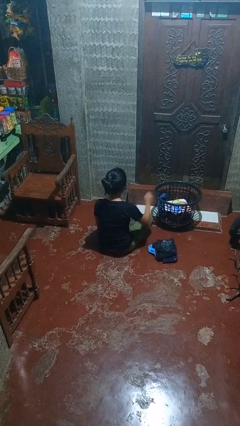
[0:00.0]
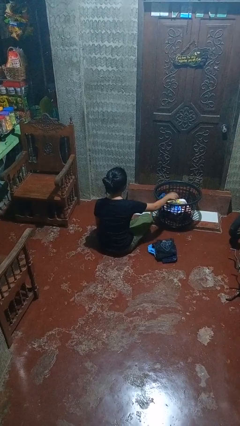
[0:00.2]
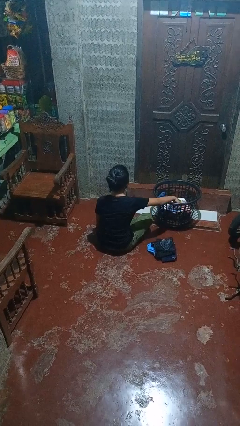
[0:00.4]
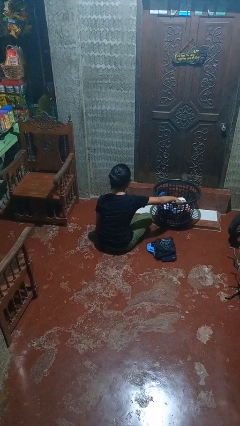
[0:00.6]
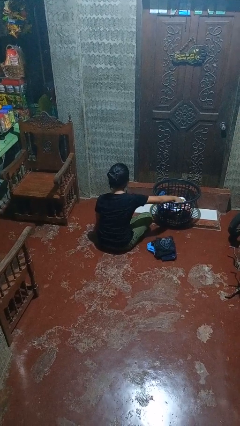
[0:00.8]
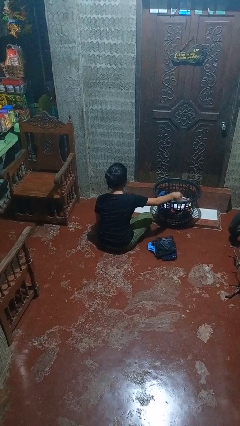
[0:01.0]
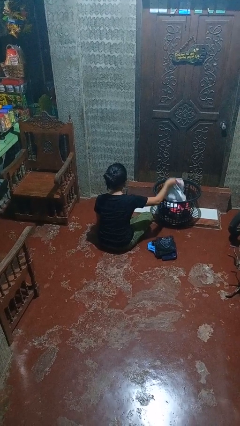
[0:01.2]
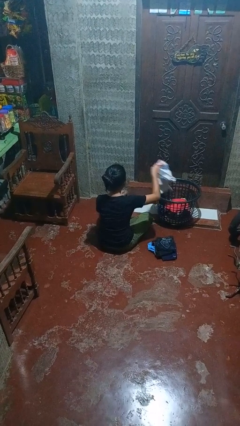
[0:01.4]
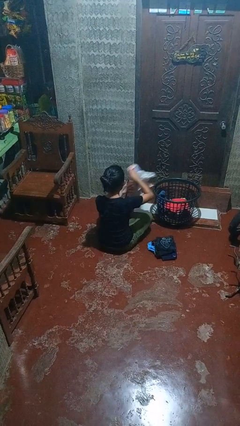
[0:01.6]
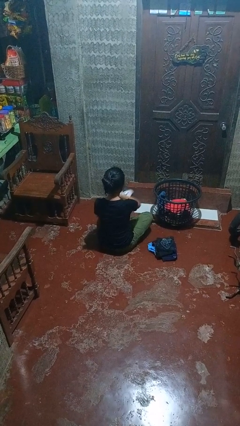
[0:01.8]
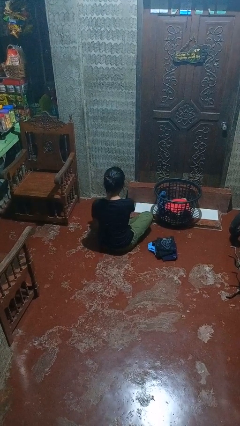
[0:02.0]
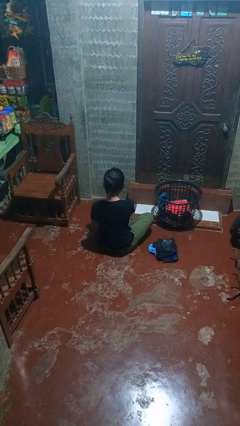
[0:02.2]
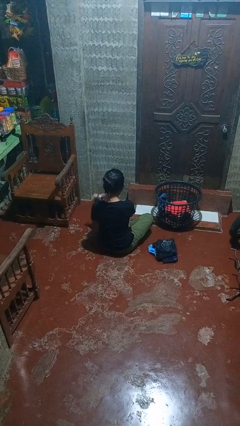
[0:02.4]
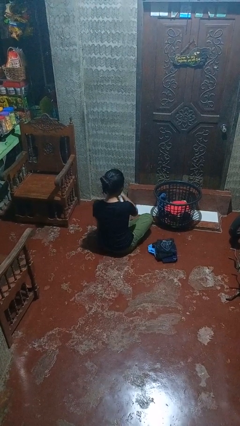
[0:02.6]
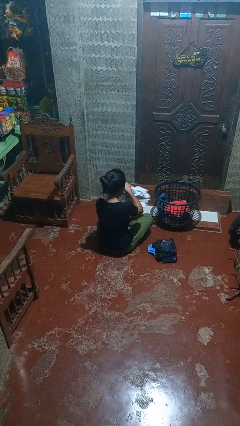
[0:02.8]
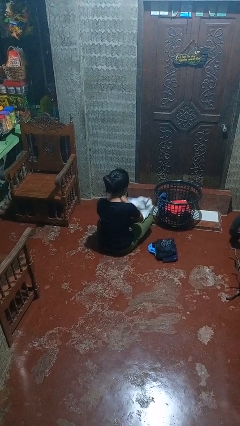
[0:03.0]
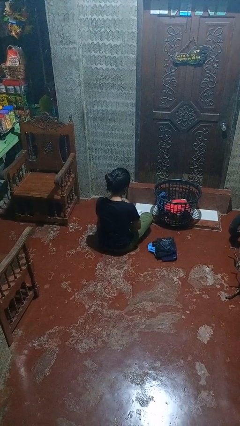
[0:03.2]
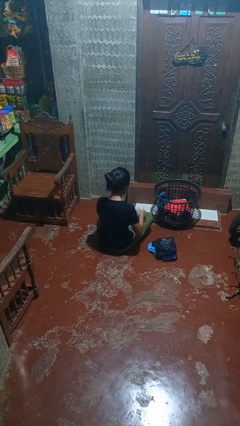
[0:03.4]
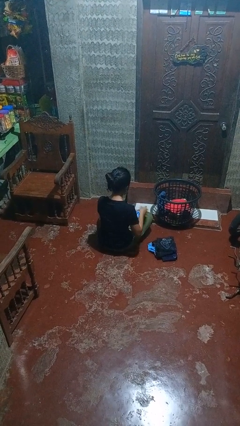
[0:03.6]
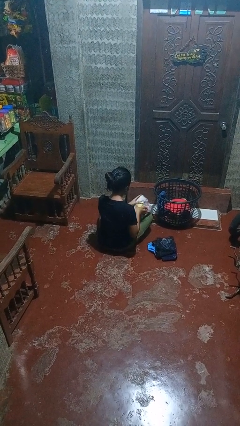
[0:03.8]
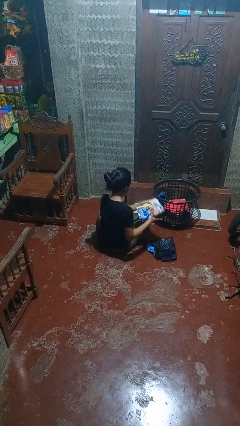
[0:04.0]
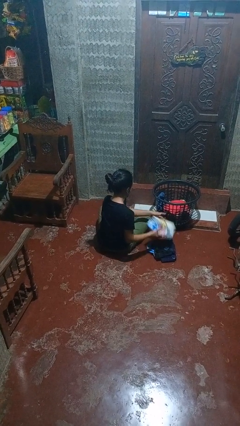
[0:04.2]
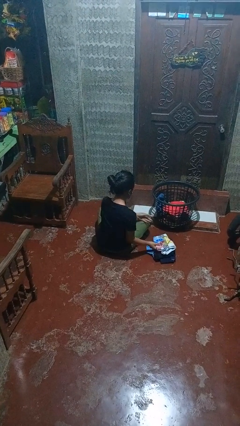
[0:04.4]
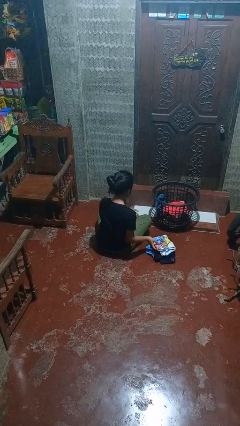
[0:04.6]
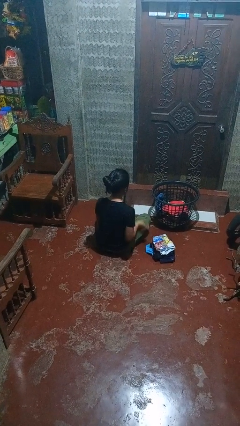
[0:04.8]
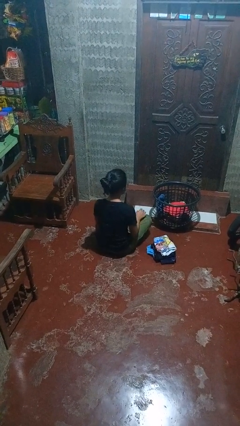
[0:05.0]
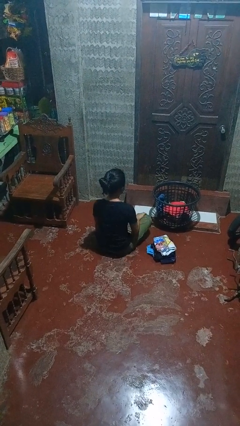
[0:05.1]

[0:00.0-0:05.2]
person folds shirt

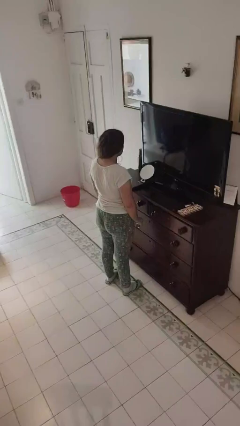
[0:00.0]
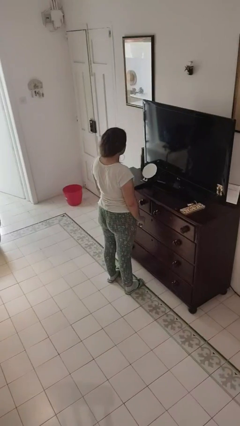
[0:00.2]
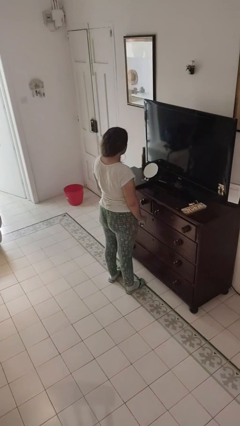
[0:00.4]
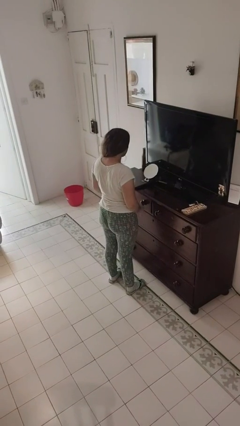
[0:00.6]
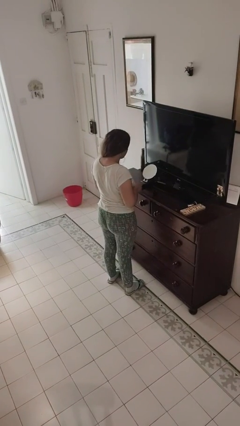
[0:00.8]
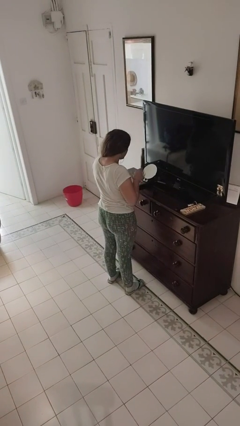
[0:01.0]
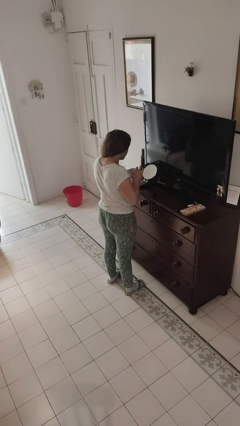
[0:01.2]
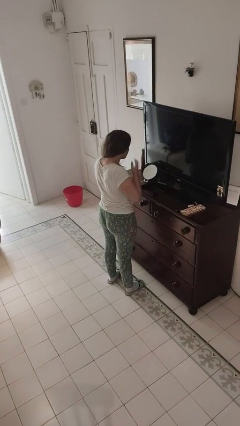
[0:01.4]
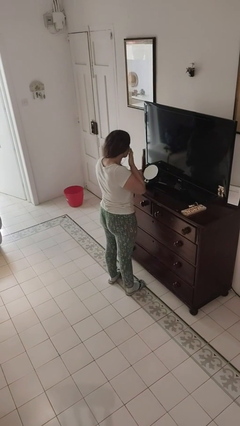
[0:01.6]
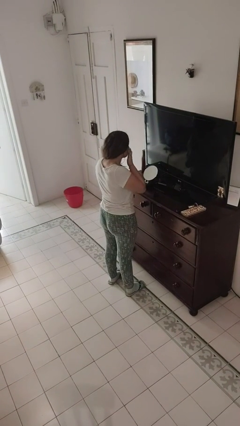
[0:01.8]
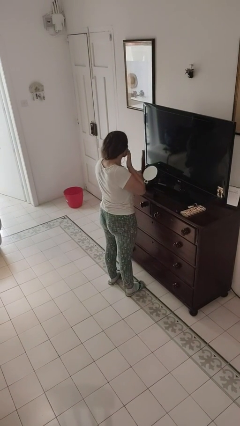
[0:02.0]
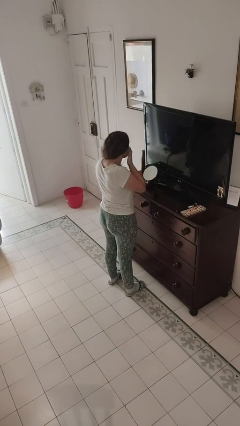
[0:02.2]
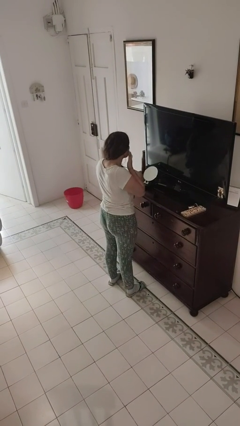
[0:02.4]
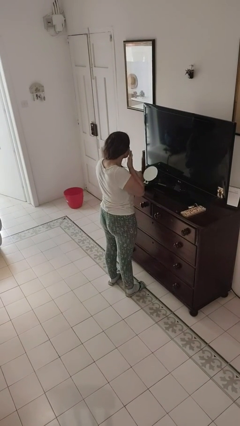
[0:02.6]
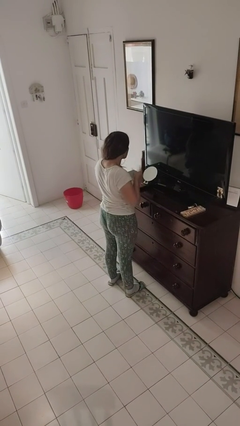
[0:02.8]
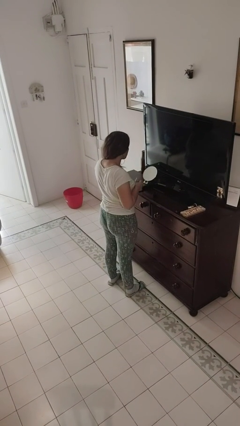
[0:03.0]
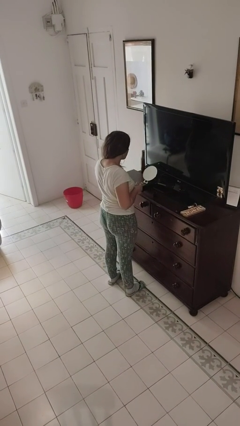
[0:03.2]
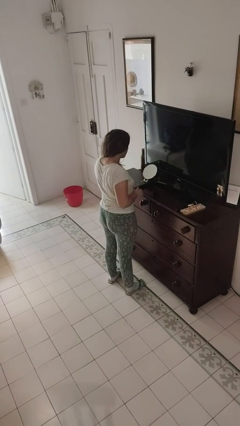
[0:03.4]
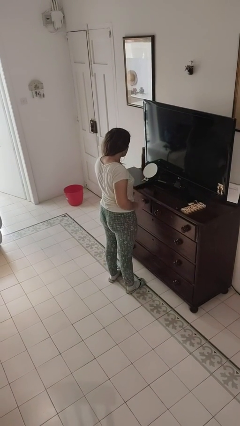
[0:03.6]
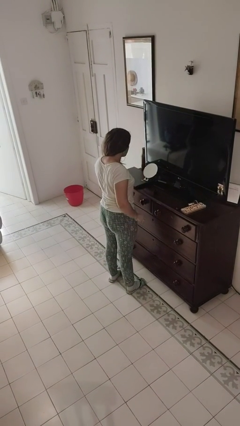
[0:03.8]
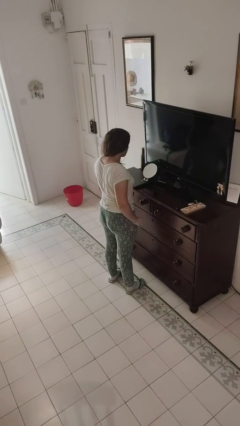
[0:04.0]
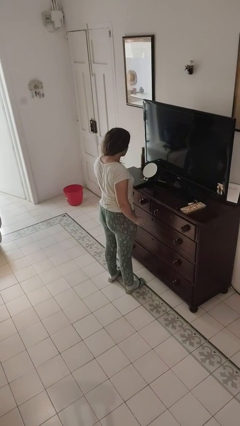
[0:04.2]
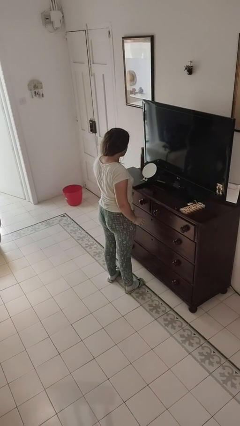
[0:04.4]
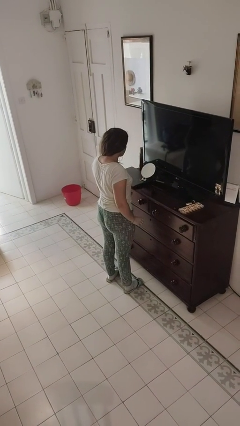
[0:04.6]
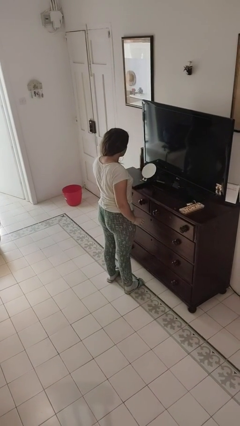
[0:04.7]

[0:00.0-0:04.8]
person applies foundation makeup

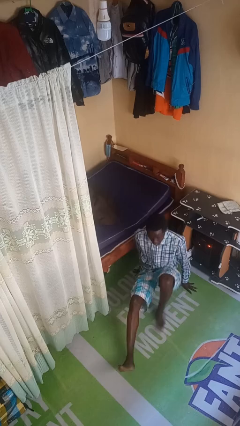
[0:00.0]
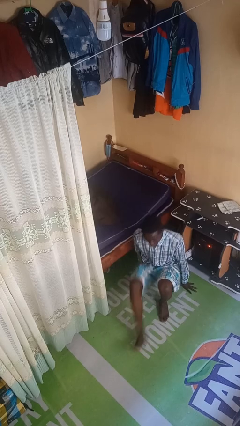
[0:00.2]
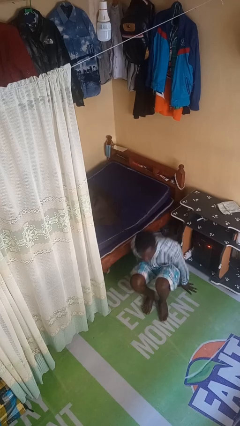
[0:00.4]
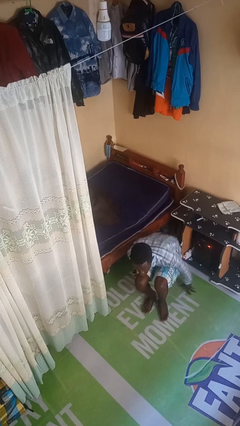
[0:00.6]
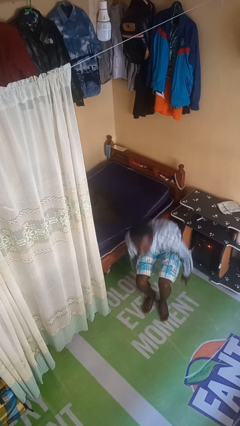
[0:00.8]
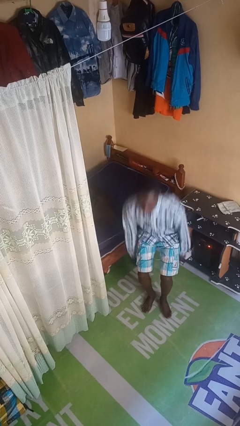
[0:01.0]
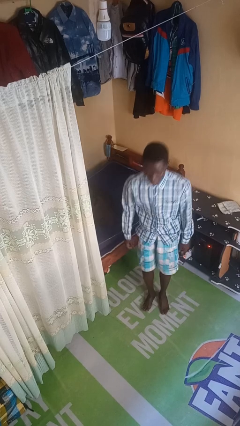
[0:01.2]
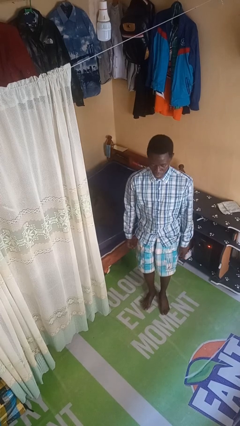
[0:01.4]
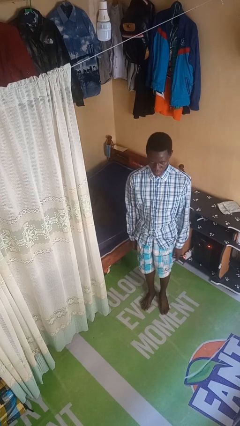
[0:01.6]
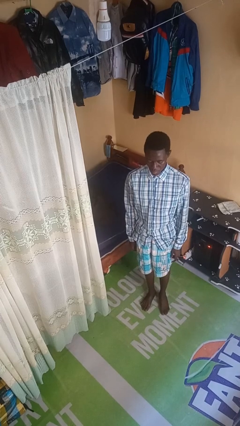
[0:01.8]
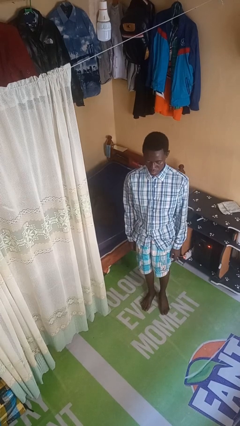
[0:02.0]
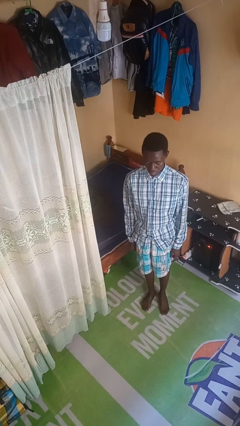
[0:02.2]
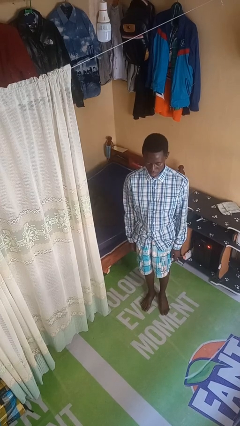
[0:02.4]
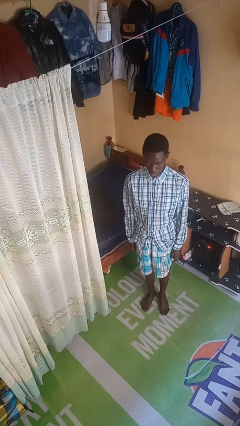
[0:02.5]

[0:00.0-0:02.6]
person stands up from floor

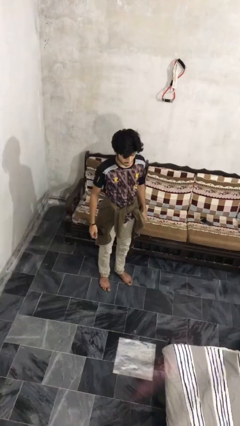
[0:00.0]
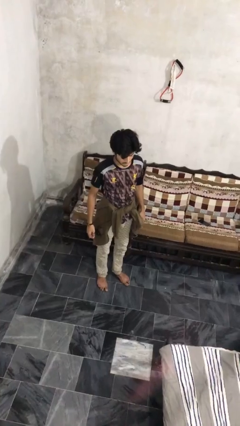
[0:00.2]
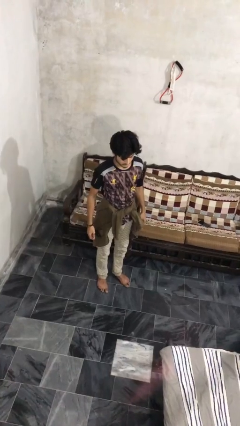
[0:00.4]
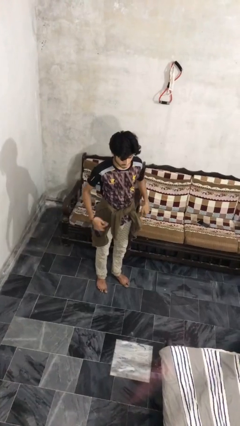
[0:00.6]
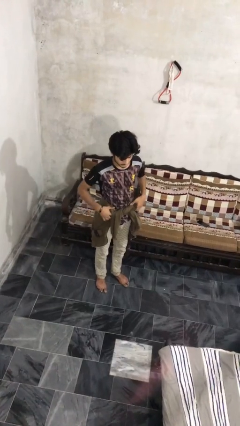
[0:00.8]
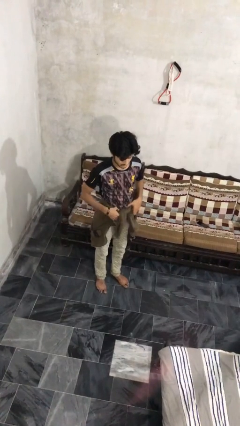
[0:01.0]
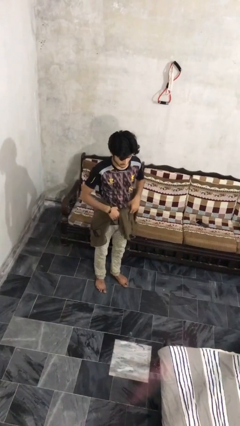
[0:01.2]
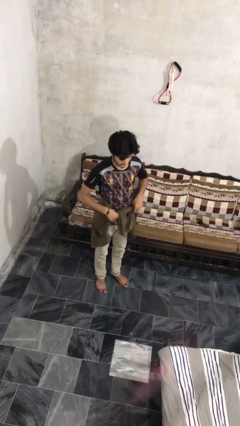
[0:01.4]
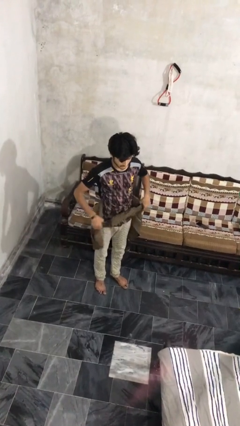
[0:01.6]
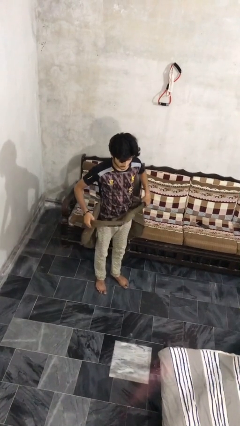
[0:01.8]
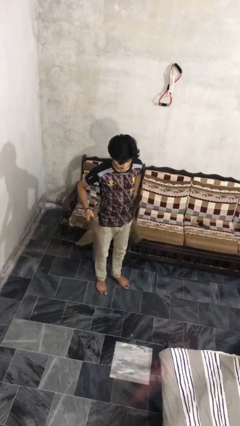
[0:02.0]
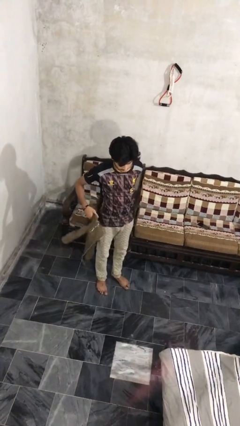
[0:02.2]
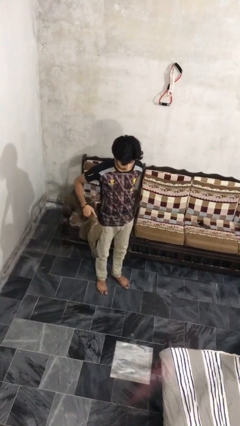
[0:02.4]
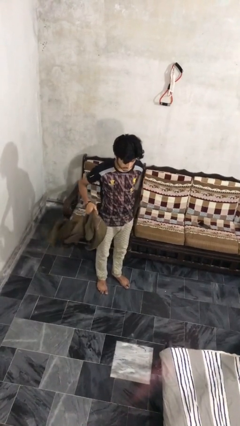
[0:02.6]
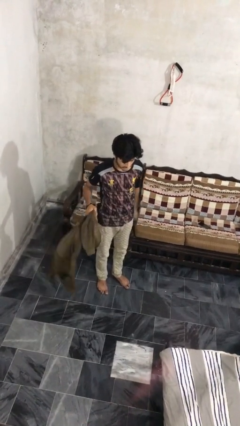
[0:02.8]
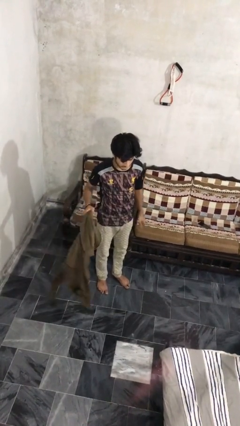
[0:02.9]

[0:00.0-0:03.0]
person unties jacket around waist

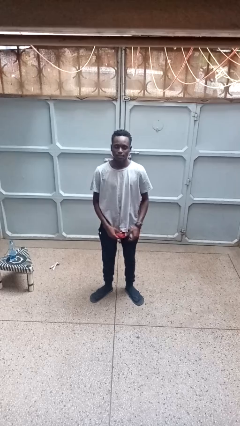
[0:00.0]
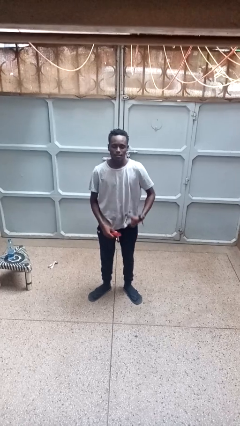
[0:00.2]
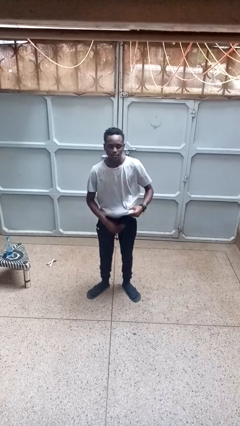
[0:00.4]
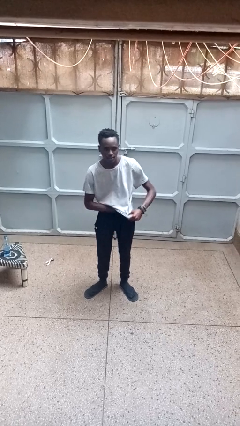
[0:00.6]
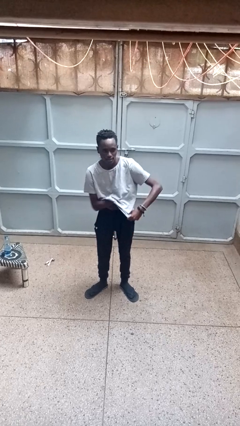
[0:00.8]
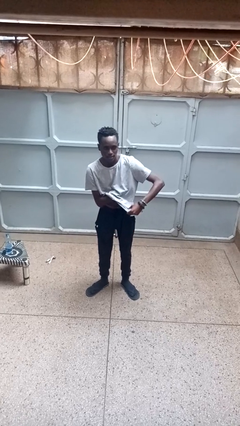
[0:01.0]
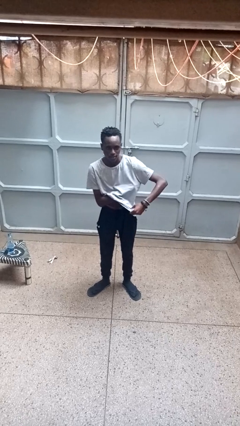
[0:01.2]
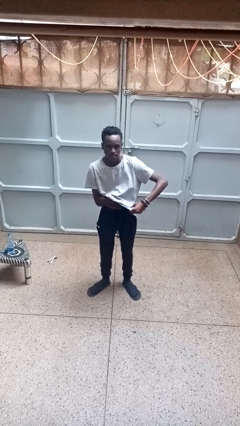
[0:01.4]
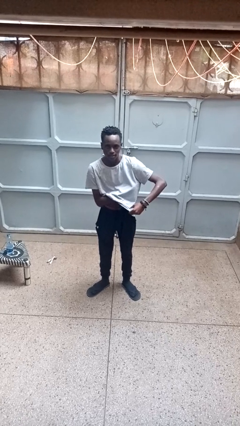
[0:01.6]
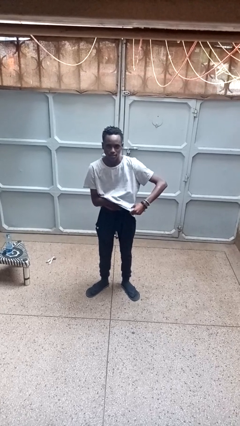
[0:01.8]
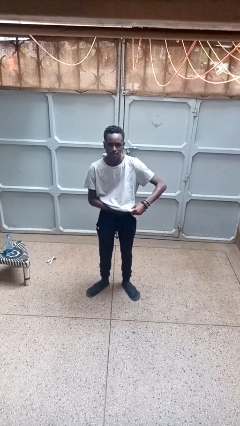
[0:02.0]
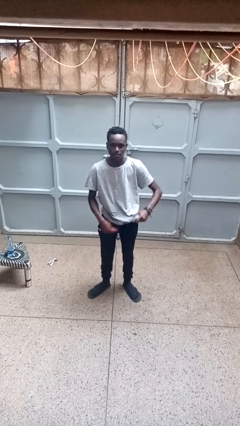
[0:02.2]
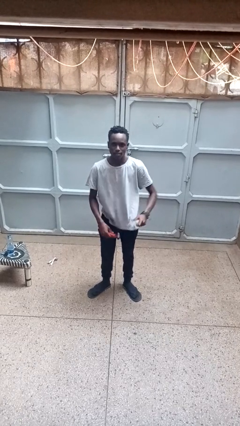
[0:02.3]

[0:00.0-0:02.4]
person applies deodorant
